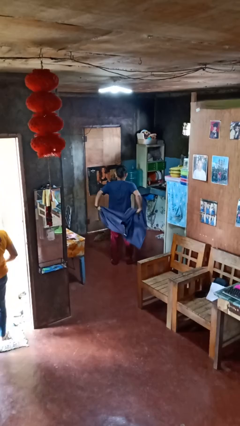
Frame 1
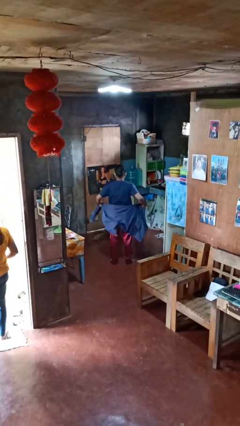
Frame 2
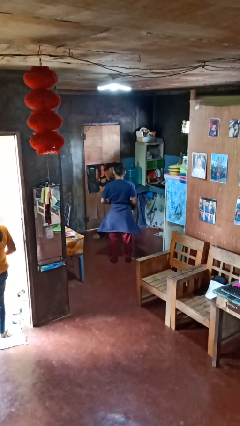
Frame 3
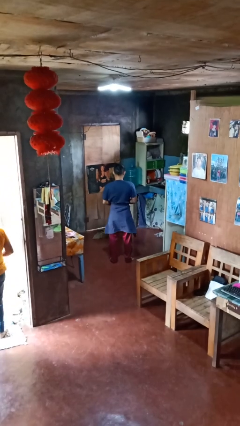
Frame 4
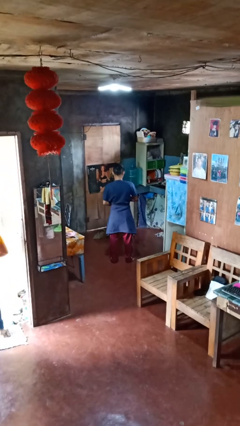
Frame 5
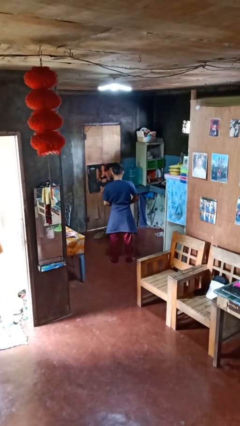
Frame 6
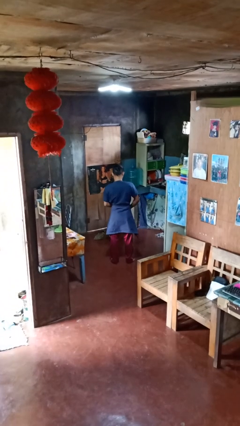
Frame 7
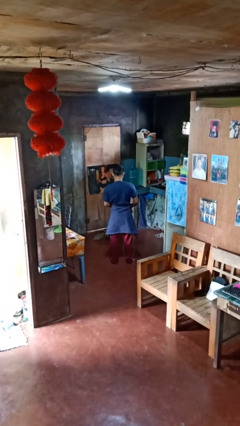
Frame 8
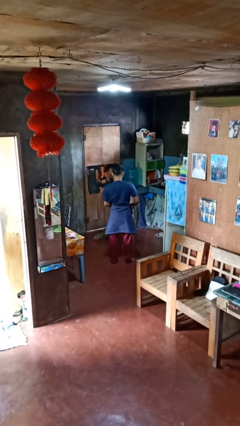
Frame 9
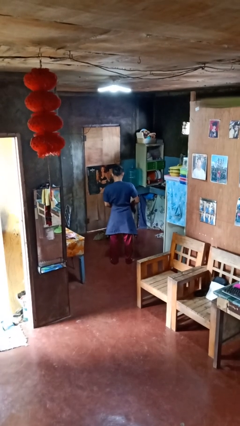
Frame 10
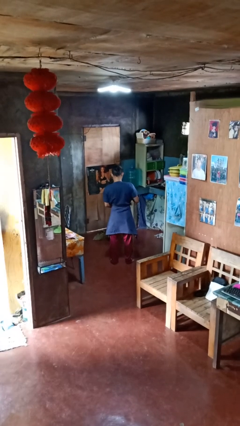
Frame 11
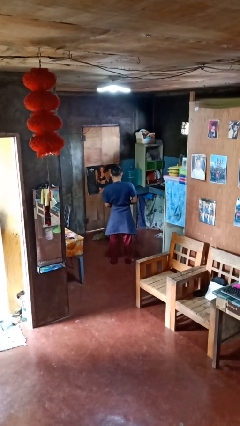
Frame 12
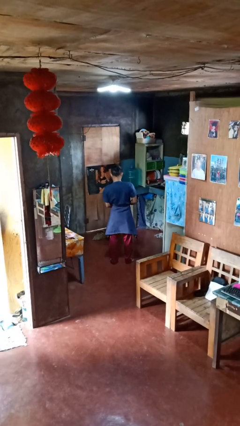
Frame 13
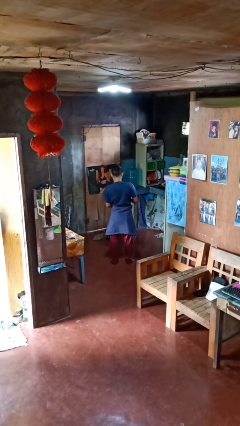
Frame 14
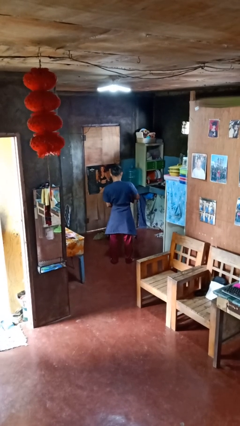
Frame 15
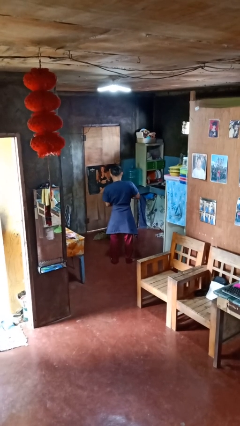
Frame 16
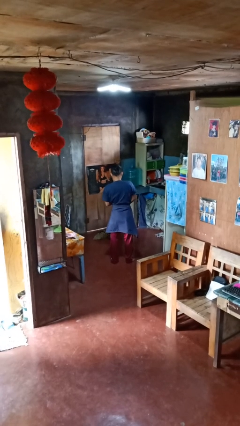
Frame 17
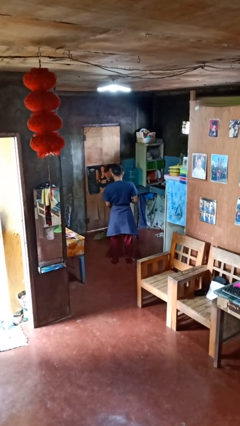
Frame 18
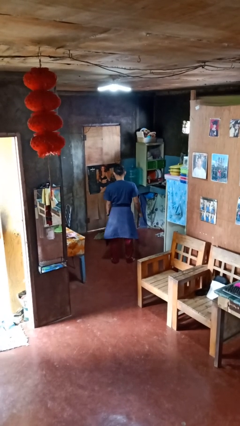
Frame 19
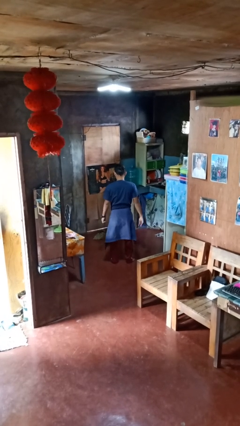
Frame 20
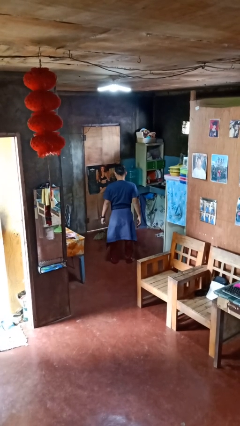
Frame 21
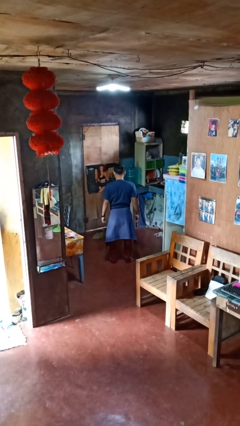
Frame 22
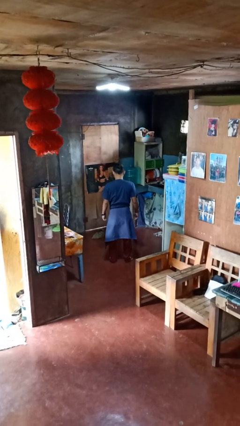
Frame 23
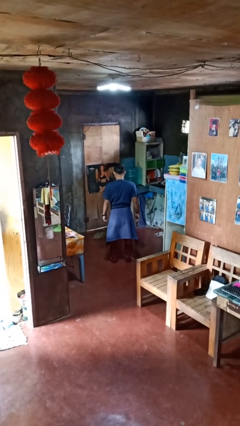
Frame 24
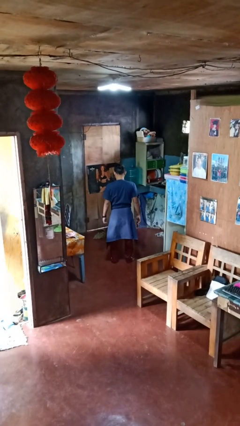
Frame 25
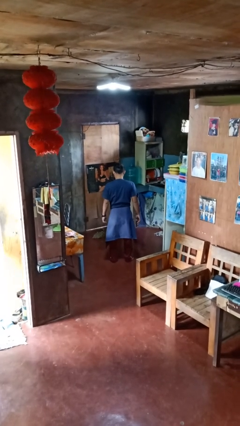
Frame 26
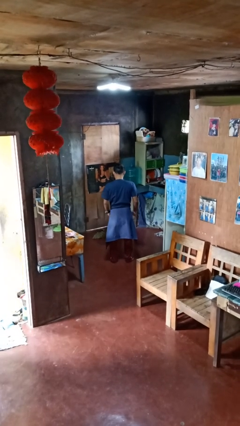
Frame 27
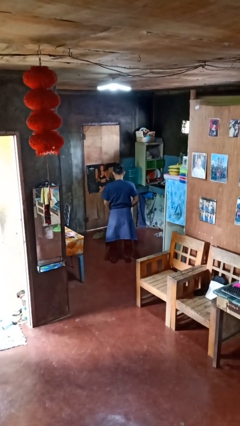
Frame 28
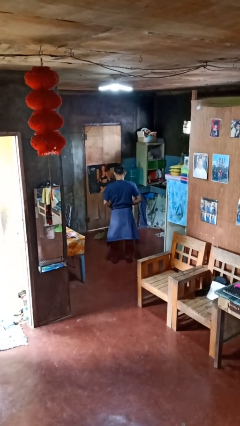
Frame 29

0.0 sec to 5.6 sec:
person ties jacket around waist

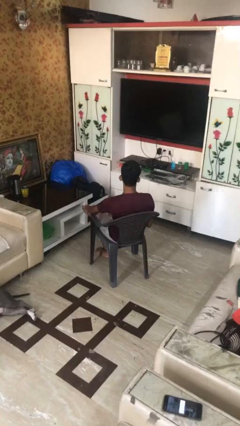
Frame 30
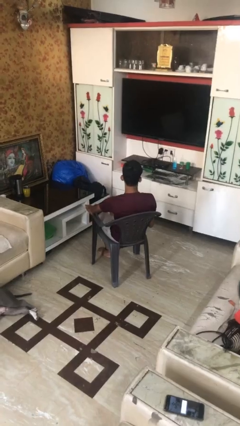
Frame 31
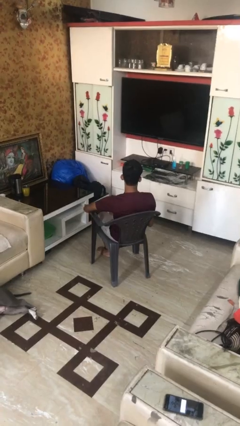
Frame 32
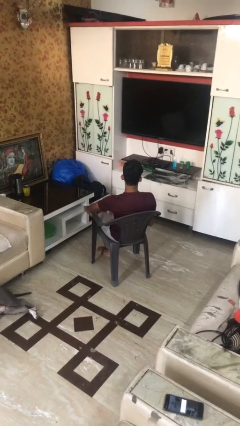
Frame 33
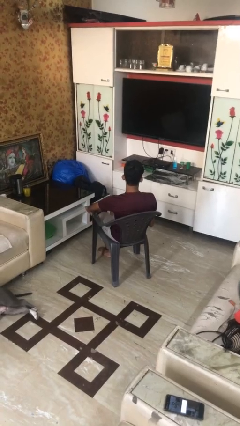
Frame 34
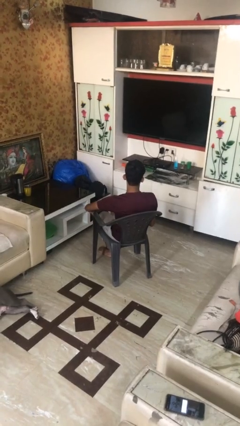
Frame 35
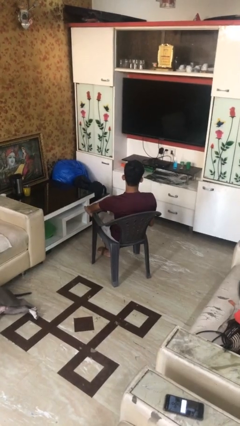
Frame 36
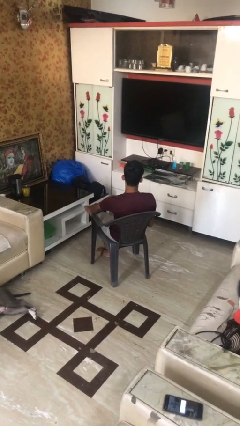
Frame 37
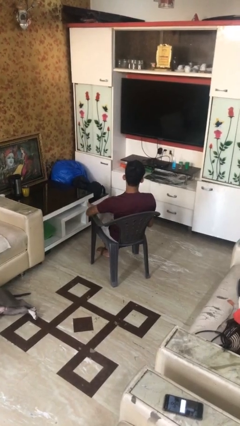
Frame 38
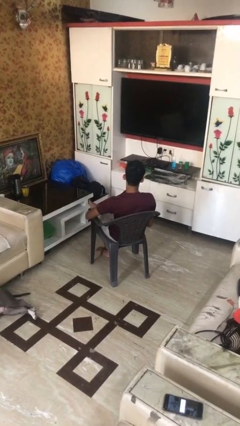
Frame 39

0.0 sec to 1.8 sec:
person rubs foot

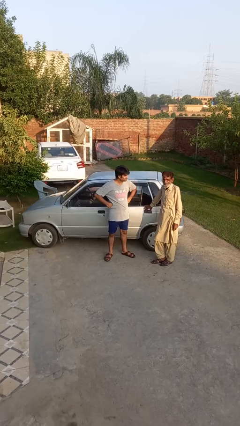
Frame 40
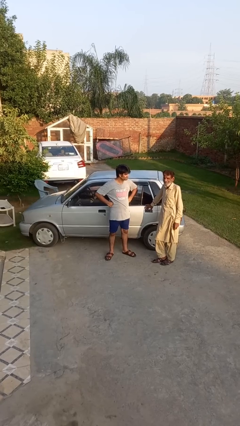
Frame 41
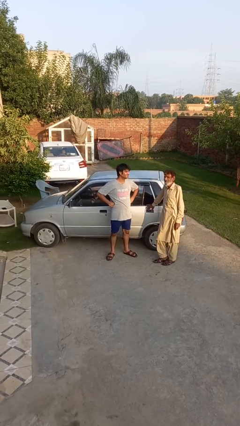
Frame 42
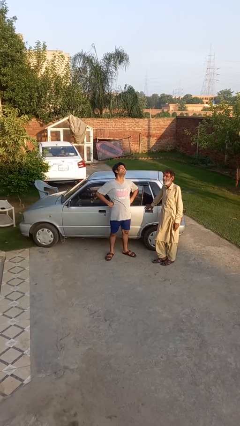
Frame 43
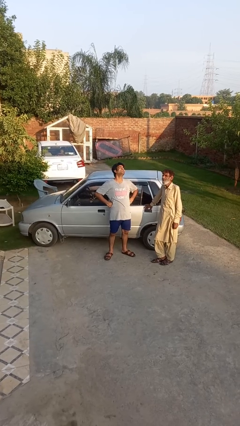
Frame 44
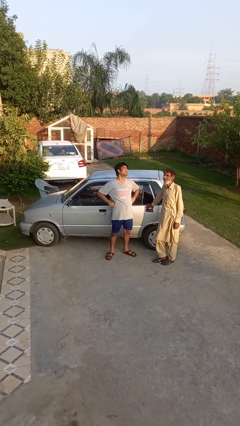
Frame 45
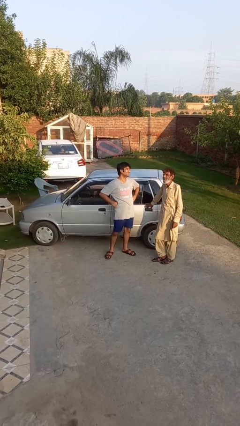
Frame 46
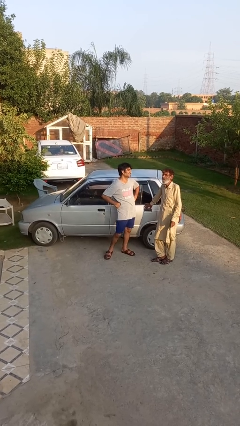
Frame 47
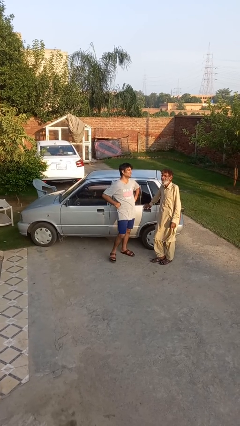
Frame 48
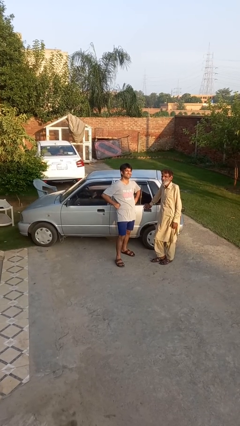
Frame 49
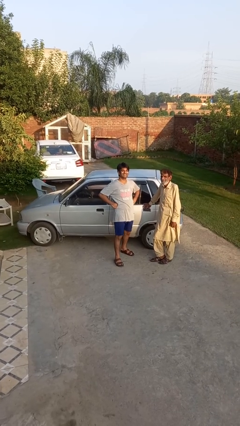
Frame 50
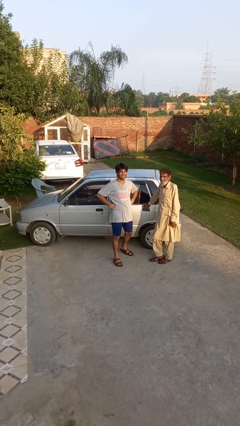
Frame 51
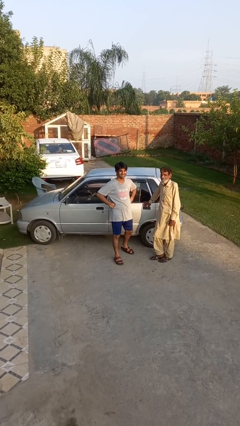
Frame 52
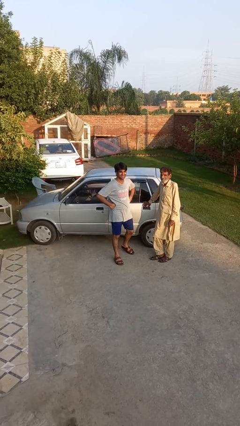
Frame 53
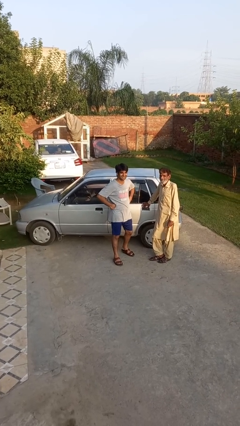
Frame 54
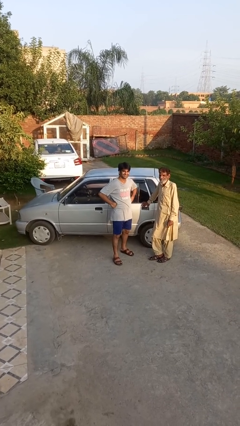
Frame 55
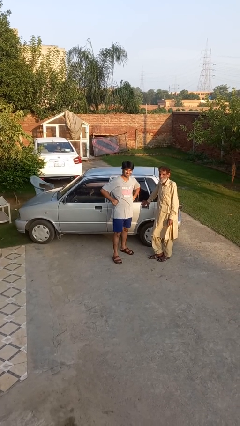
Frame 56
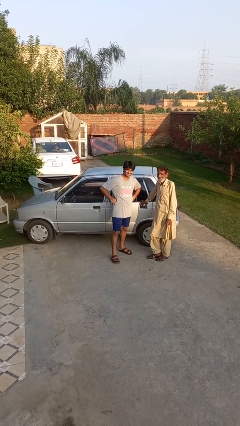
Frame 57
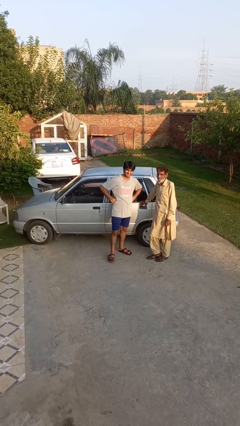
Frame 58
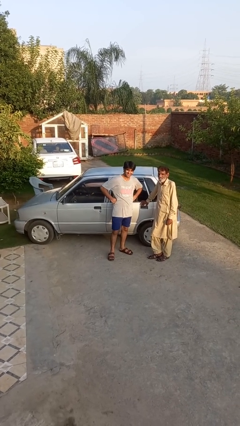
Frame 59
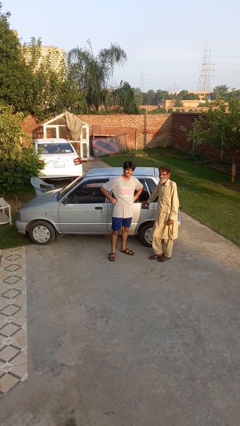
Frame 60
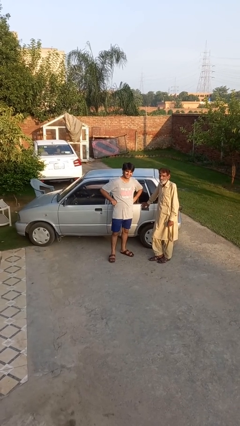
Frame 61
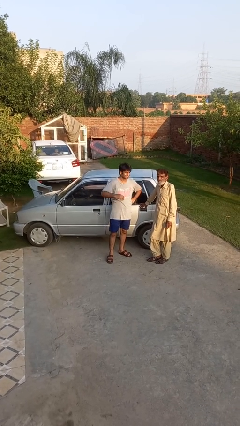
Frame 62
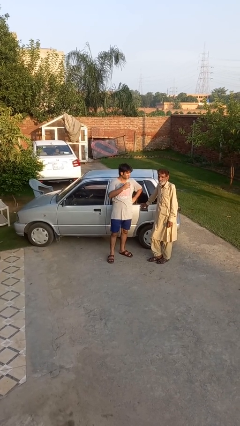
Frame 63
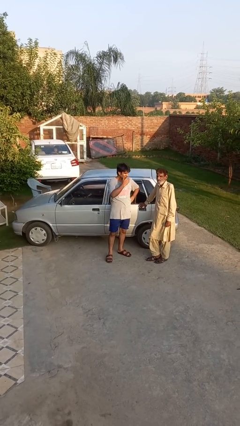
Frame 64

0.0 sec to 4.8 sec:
person laughs with person

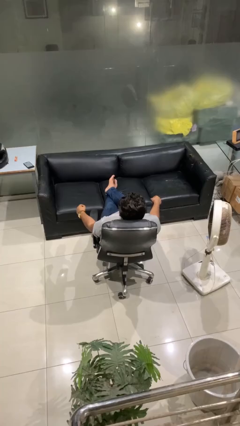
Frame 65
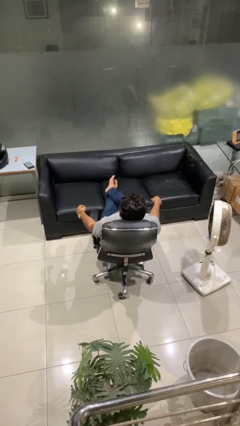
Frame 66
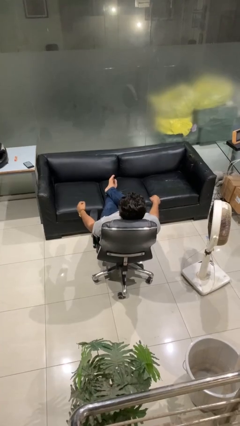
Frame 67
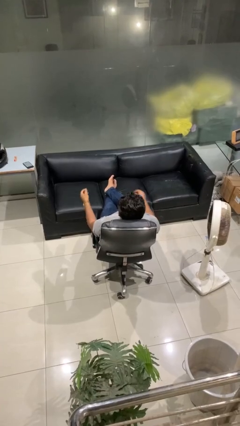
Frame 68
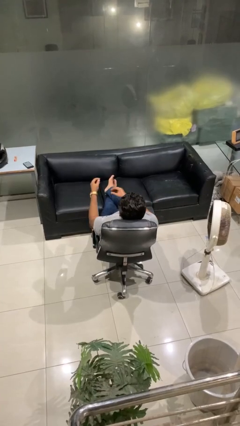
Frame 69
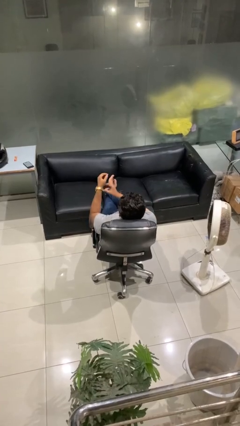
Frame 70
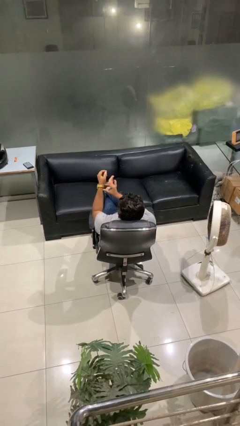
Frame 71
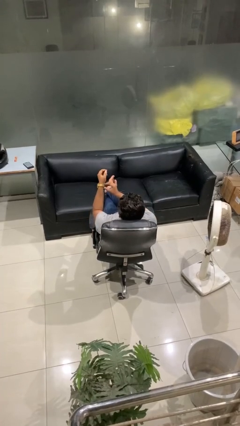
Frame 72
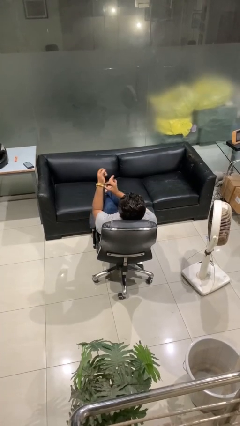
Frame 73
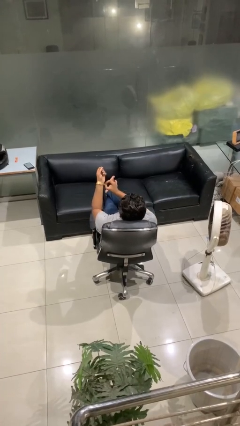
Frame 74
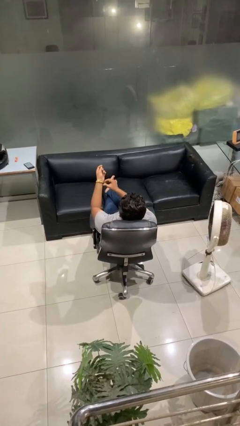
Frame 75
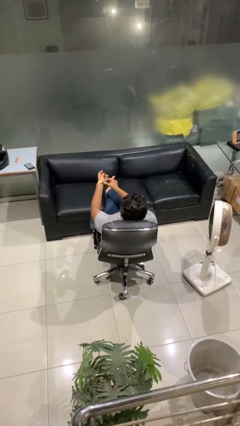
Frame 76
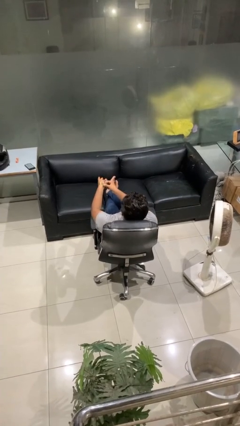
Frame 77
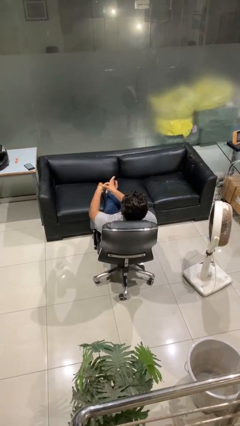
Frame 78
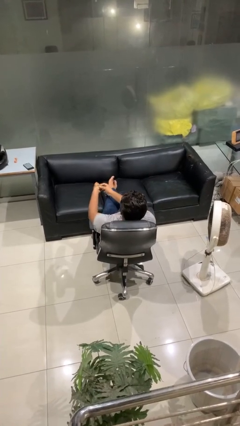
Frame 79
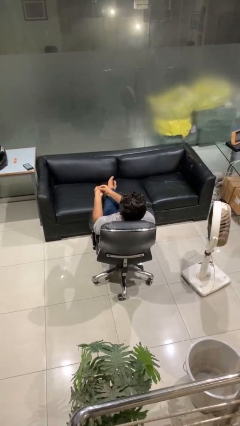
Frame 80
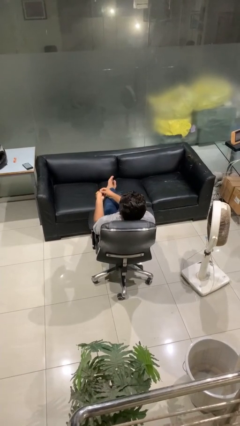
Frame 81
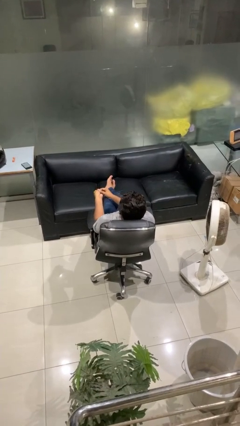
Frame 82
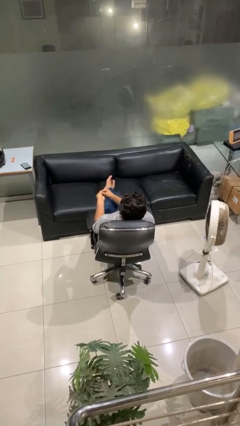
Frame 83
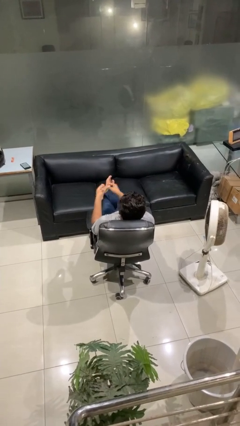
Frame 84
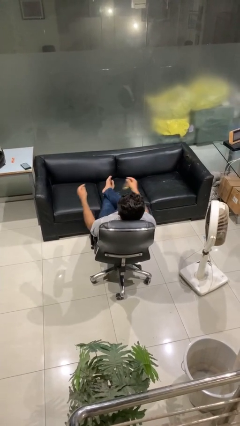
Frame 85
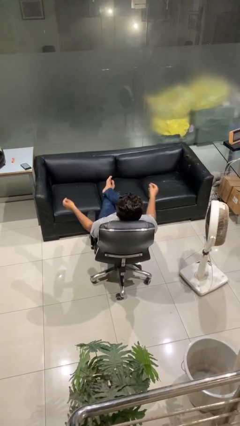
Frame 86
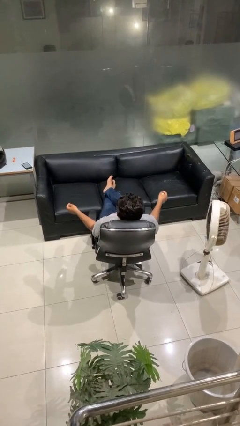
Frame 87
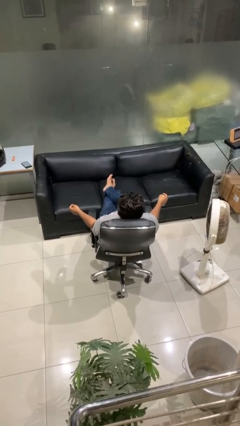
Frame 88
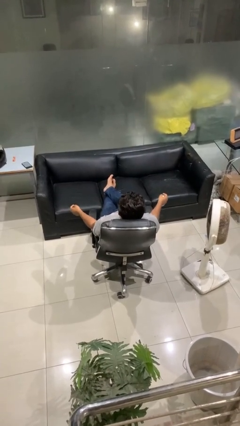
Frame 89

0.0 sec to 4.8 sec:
person takes off wristwatch

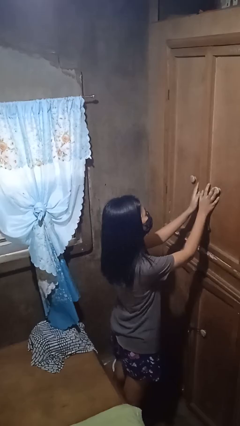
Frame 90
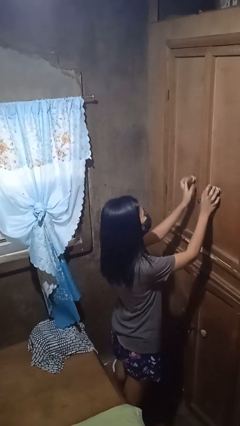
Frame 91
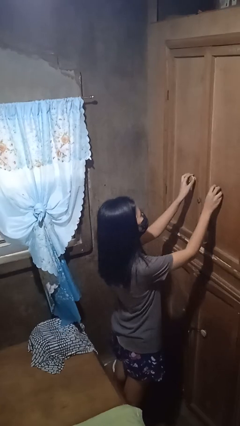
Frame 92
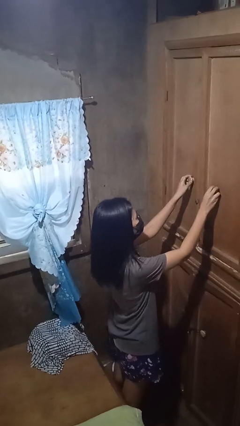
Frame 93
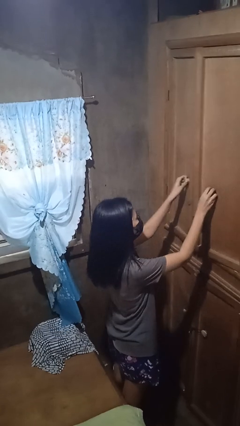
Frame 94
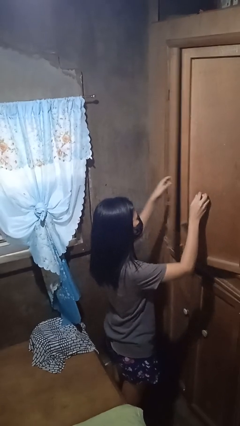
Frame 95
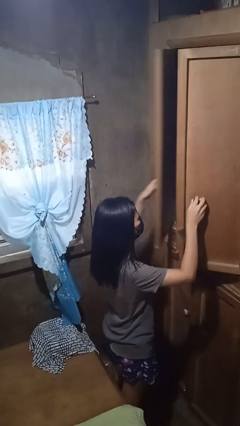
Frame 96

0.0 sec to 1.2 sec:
person opens closet door
